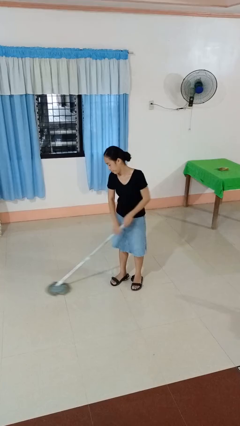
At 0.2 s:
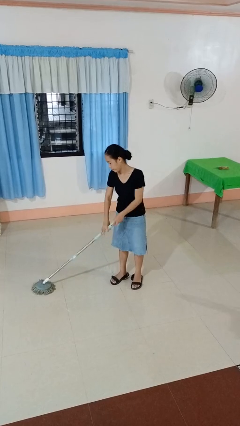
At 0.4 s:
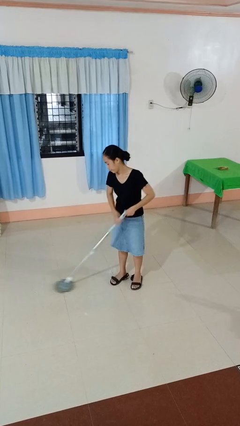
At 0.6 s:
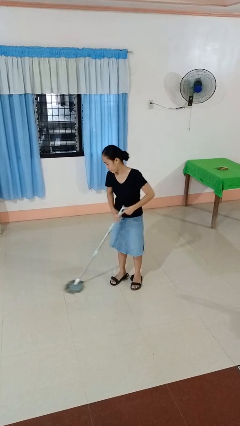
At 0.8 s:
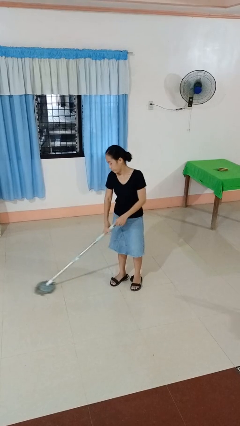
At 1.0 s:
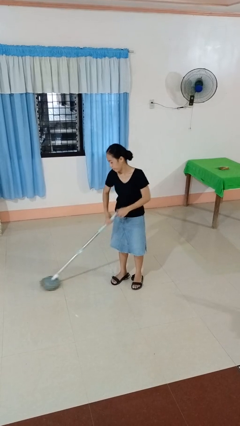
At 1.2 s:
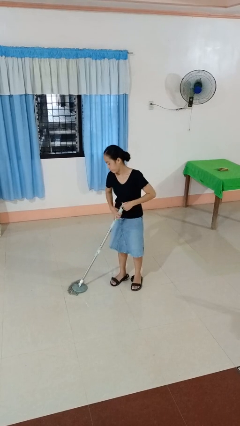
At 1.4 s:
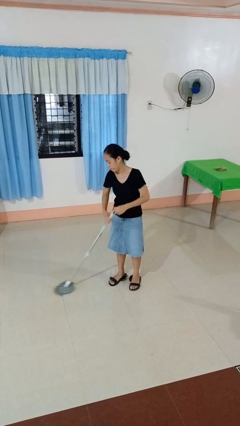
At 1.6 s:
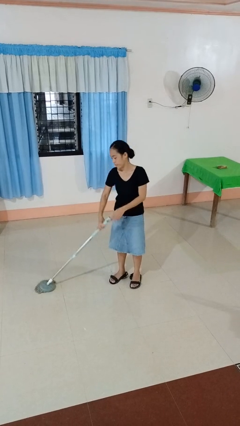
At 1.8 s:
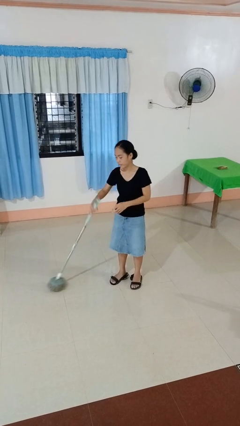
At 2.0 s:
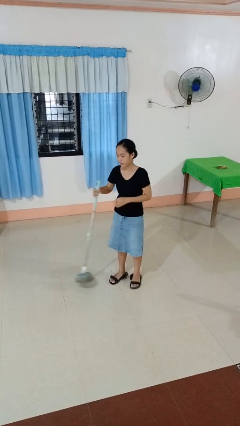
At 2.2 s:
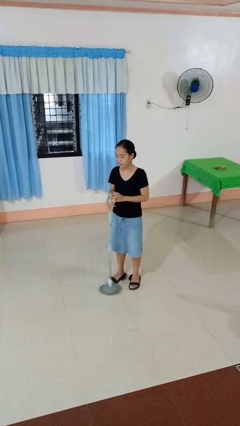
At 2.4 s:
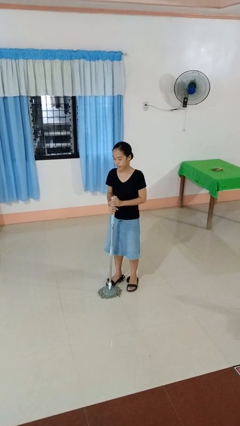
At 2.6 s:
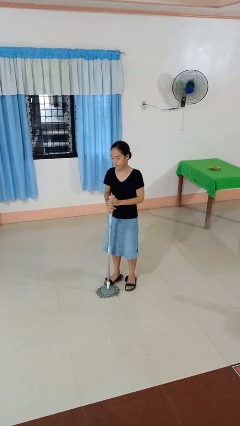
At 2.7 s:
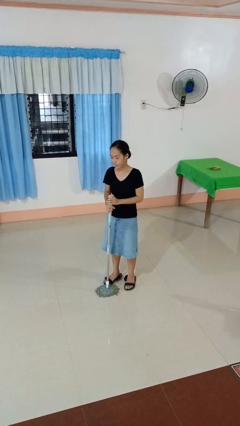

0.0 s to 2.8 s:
person mops

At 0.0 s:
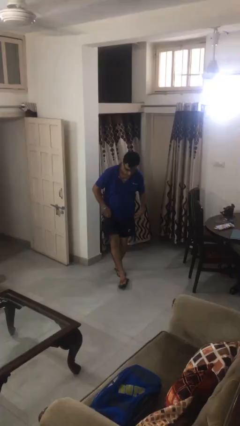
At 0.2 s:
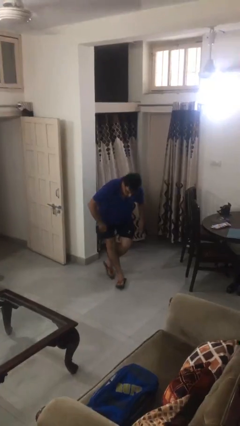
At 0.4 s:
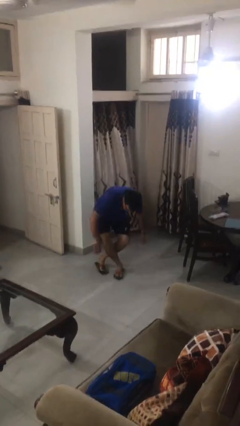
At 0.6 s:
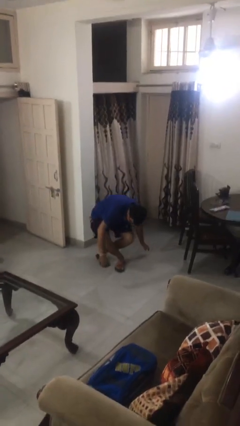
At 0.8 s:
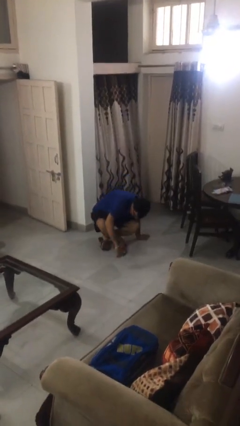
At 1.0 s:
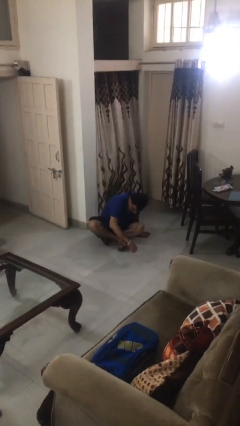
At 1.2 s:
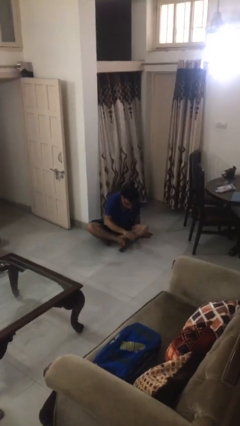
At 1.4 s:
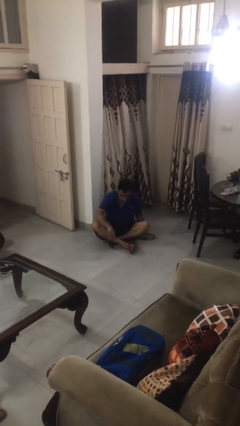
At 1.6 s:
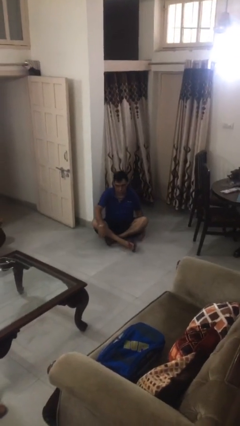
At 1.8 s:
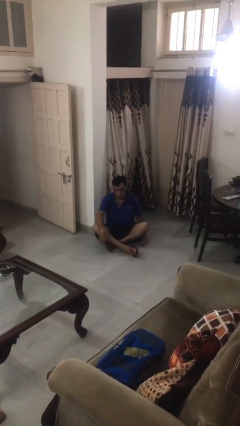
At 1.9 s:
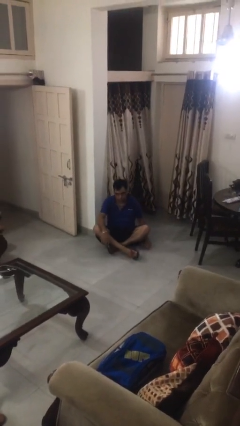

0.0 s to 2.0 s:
person sits crisscross

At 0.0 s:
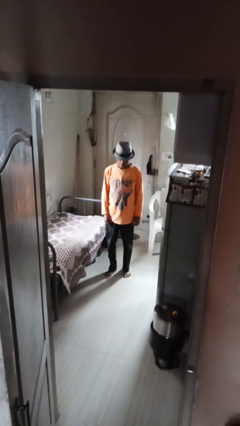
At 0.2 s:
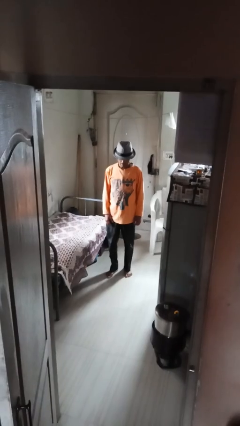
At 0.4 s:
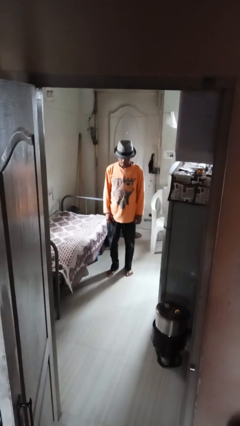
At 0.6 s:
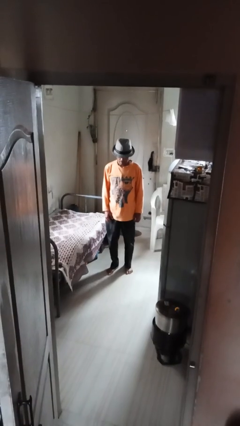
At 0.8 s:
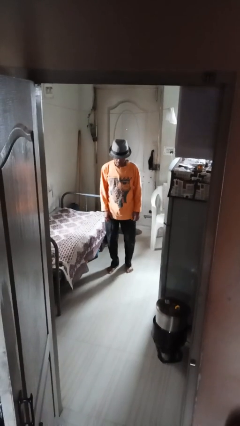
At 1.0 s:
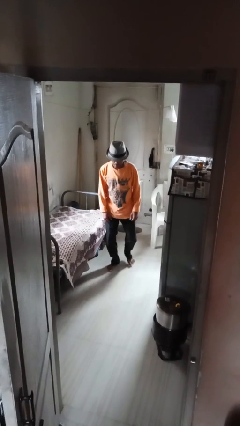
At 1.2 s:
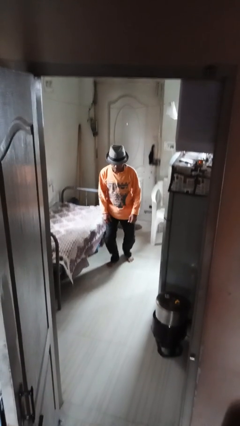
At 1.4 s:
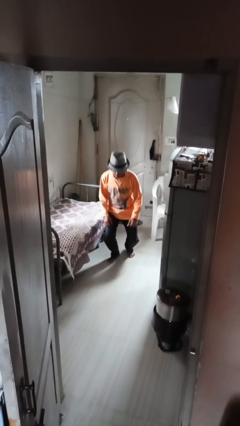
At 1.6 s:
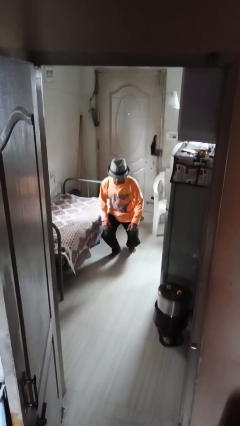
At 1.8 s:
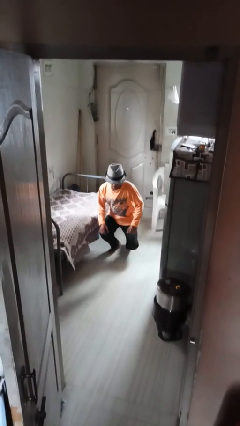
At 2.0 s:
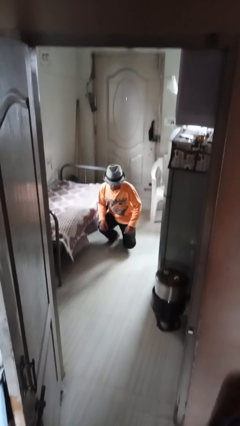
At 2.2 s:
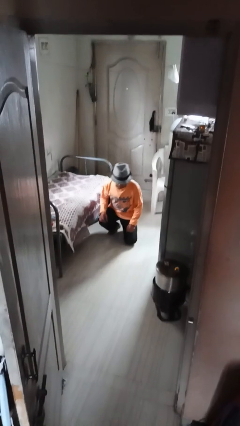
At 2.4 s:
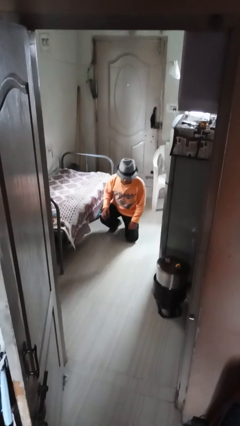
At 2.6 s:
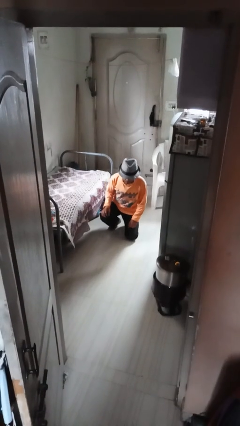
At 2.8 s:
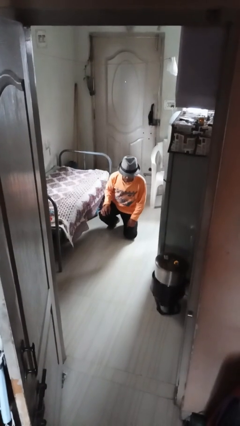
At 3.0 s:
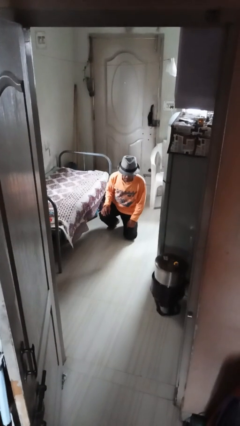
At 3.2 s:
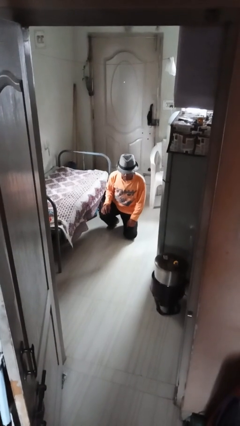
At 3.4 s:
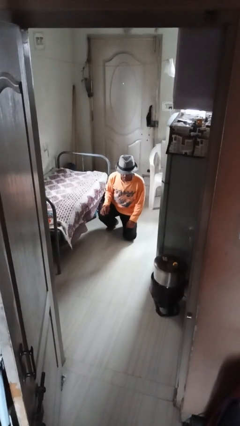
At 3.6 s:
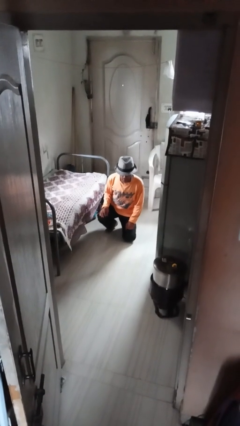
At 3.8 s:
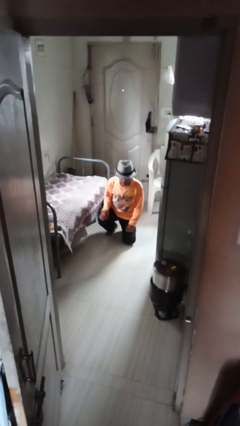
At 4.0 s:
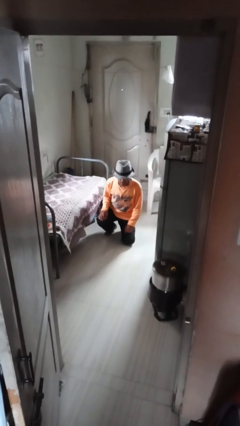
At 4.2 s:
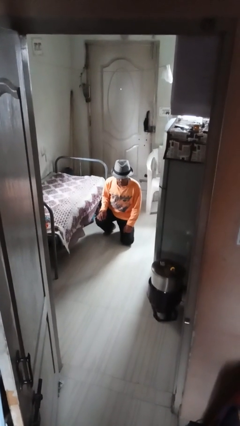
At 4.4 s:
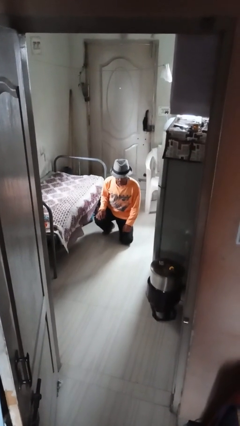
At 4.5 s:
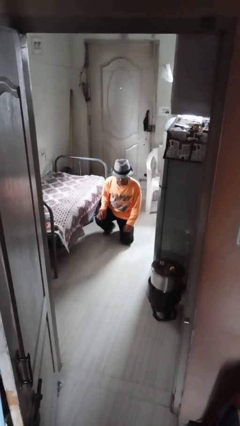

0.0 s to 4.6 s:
person kneels

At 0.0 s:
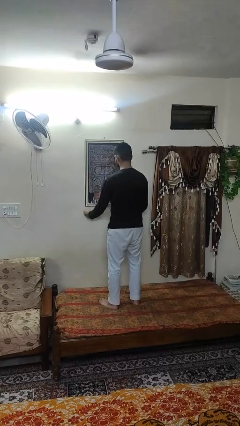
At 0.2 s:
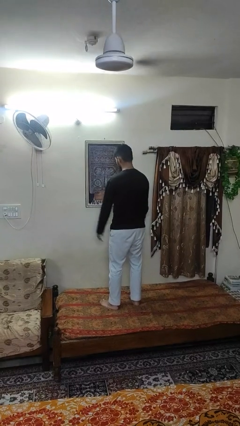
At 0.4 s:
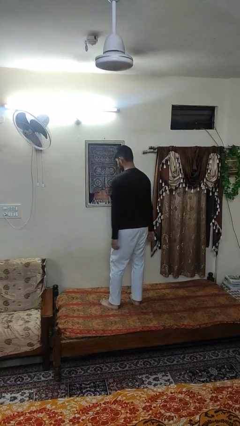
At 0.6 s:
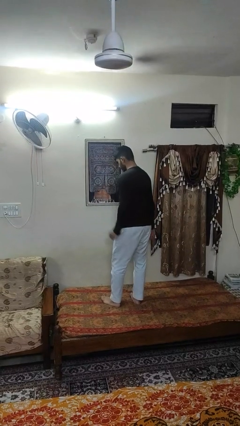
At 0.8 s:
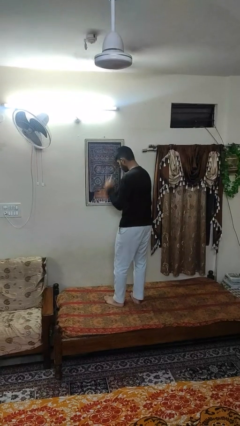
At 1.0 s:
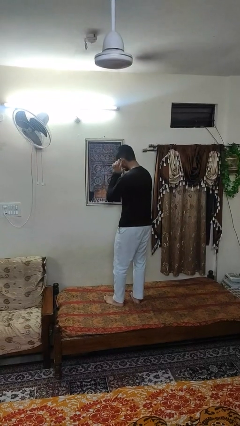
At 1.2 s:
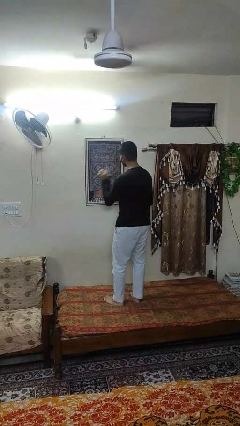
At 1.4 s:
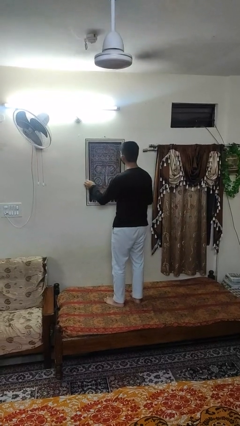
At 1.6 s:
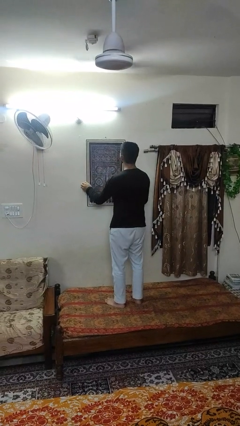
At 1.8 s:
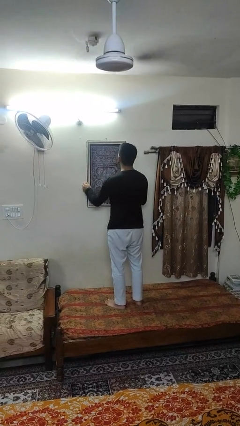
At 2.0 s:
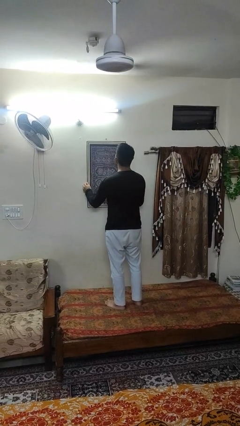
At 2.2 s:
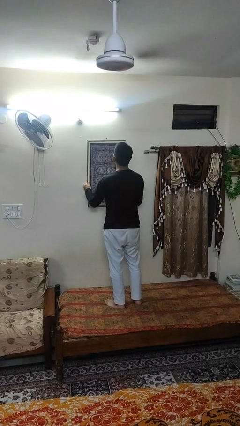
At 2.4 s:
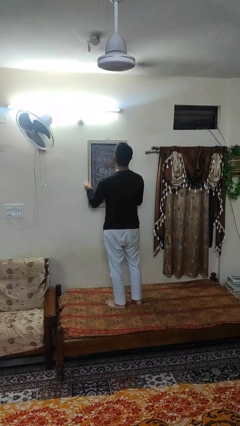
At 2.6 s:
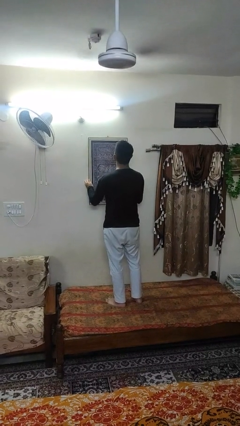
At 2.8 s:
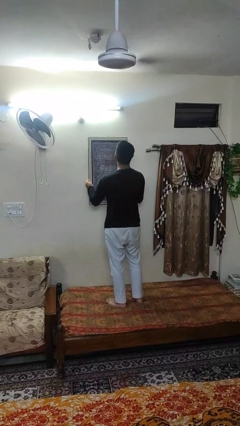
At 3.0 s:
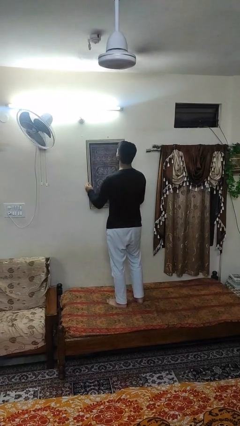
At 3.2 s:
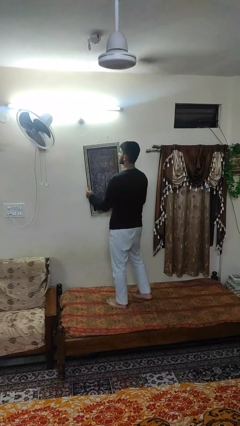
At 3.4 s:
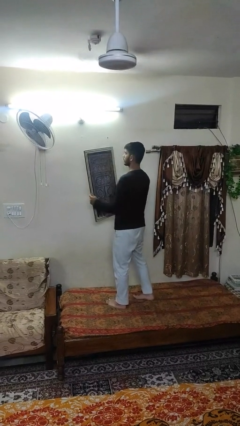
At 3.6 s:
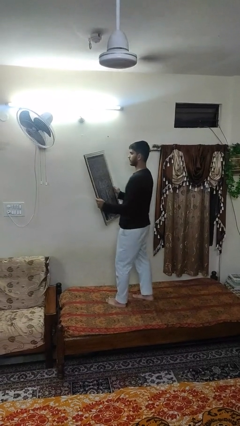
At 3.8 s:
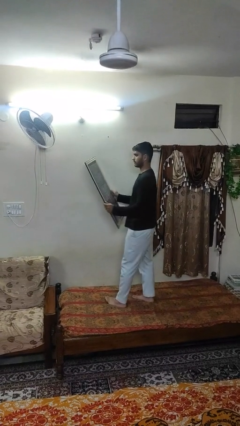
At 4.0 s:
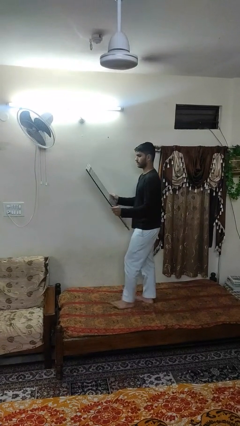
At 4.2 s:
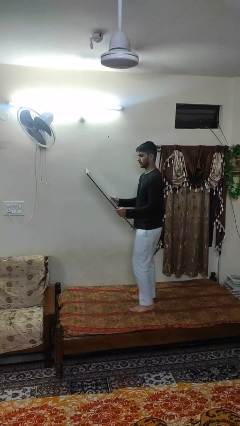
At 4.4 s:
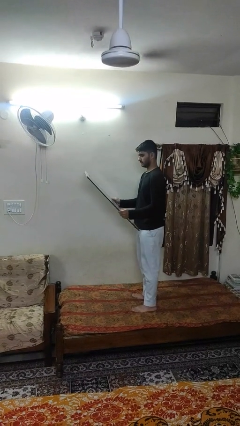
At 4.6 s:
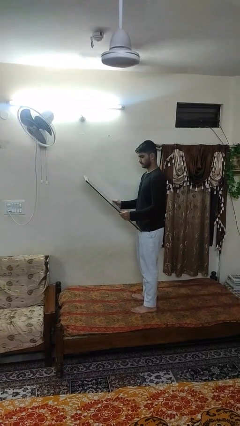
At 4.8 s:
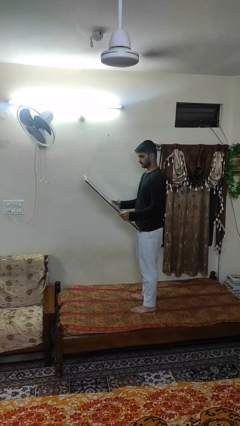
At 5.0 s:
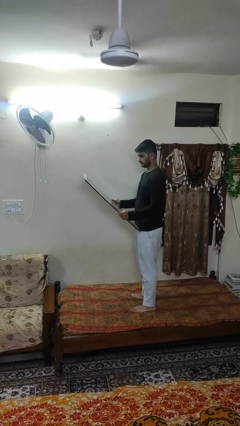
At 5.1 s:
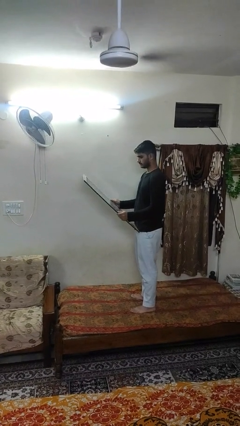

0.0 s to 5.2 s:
person takes down picture frame

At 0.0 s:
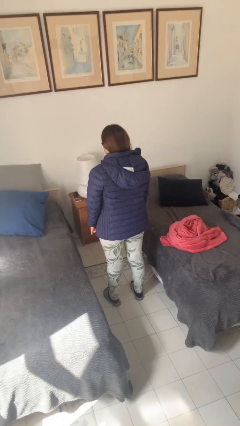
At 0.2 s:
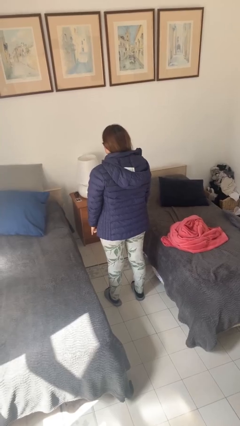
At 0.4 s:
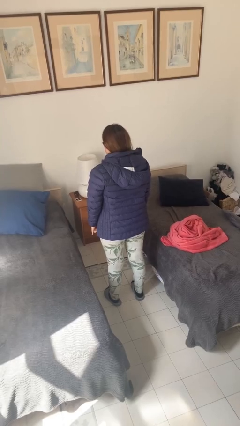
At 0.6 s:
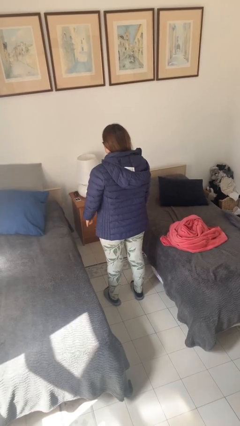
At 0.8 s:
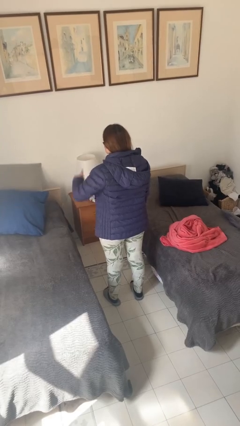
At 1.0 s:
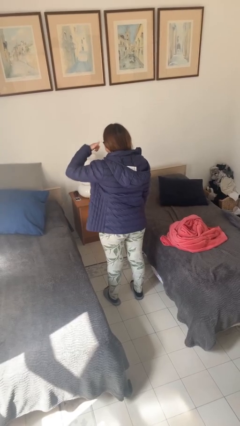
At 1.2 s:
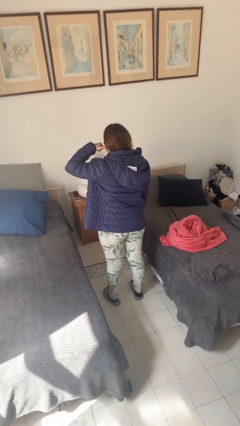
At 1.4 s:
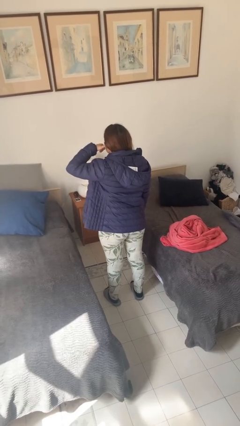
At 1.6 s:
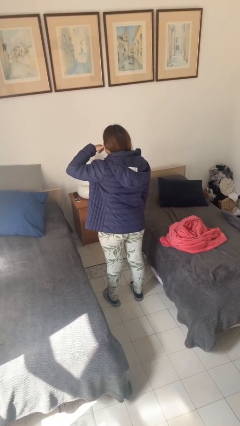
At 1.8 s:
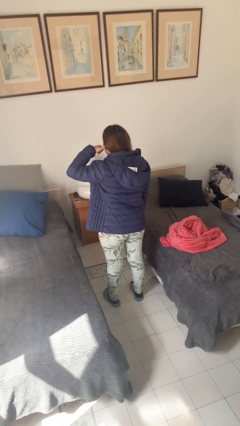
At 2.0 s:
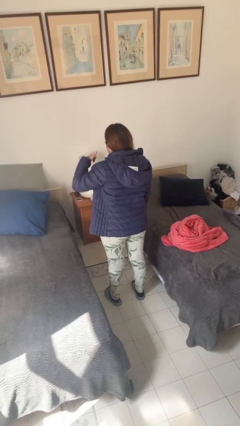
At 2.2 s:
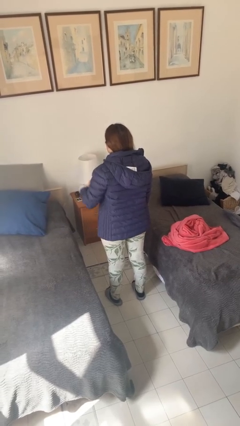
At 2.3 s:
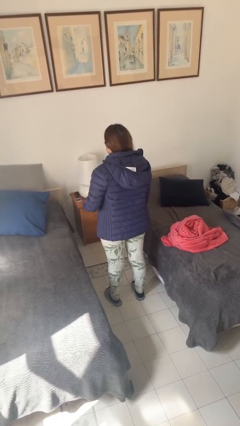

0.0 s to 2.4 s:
person gestures call me

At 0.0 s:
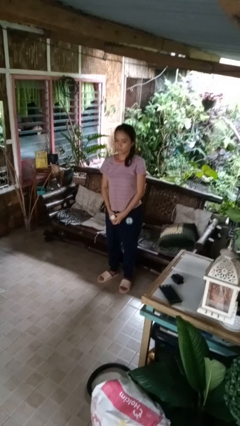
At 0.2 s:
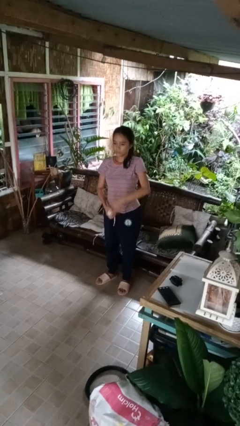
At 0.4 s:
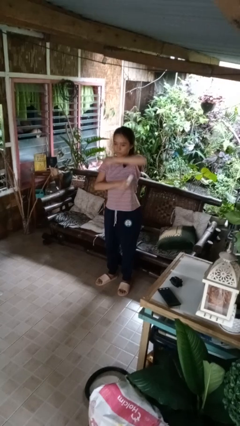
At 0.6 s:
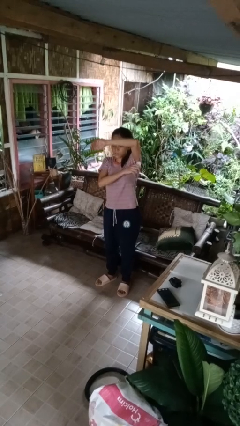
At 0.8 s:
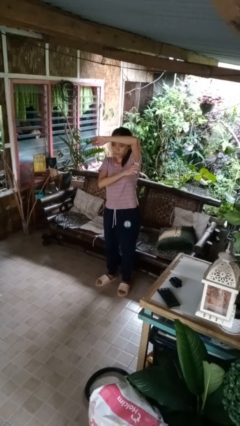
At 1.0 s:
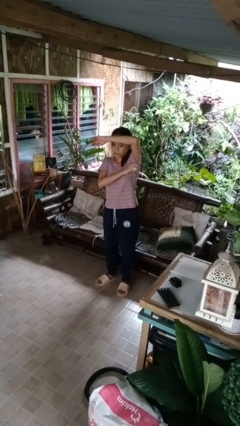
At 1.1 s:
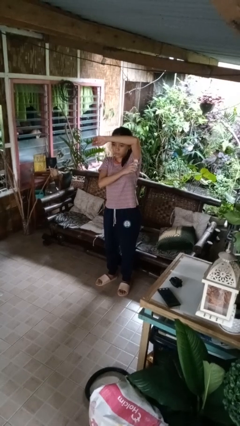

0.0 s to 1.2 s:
person applies deodorant
